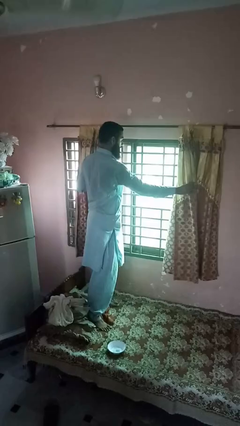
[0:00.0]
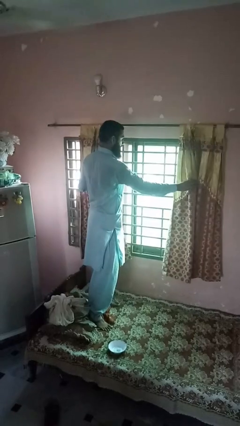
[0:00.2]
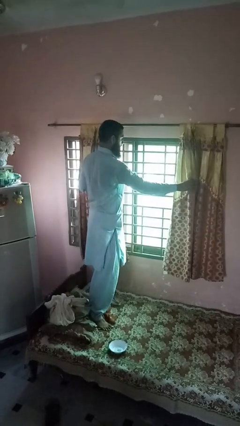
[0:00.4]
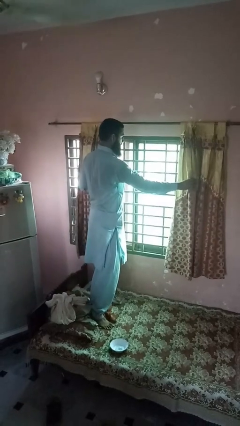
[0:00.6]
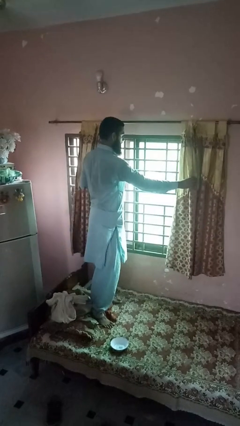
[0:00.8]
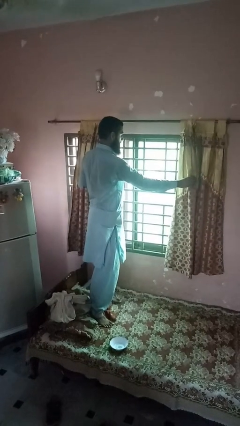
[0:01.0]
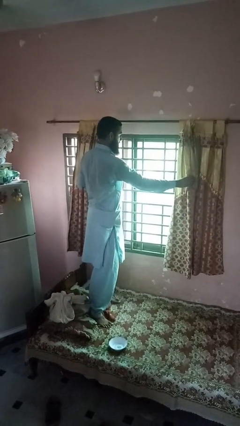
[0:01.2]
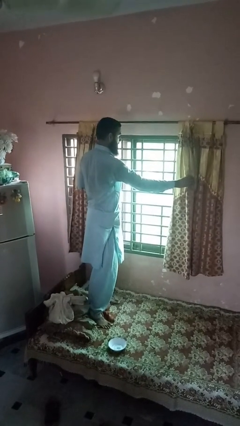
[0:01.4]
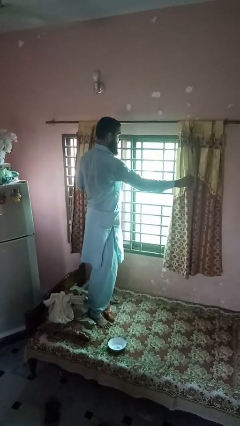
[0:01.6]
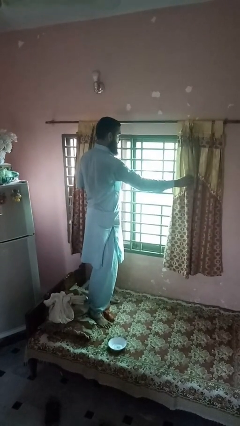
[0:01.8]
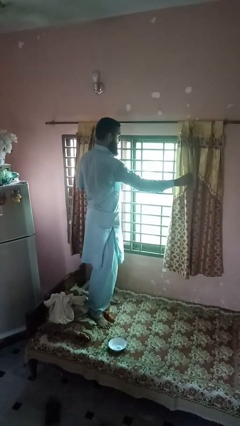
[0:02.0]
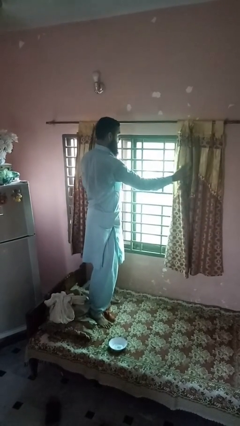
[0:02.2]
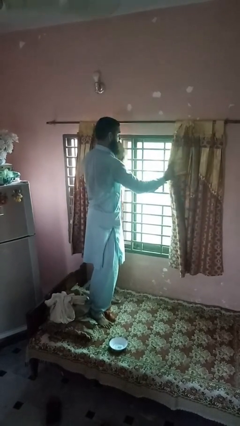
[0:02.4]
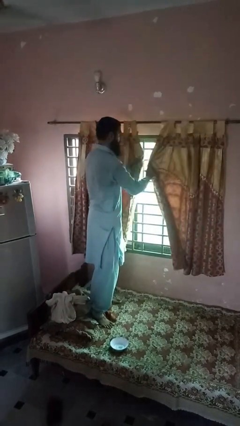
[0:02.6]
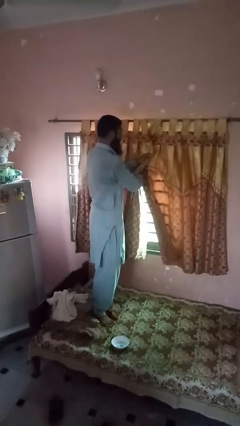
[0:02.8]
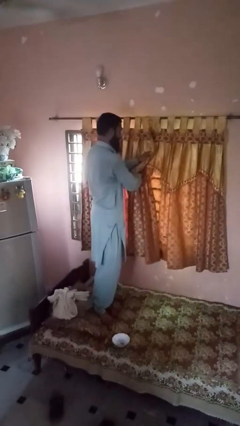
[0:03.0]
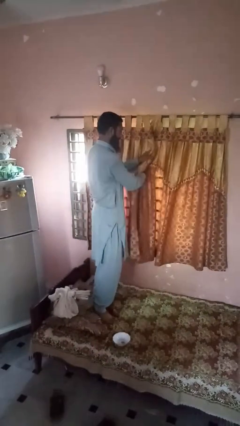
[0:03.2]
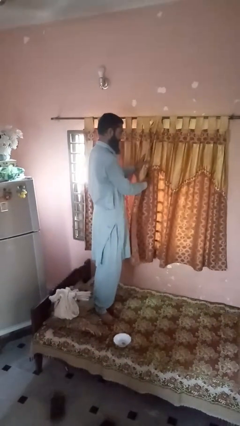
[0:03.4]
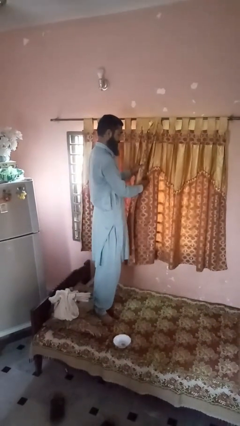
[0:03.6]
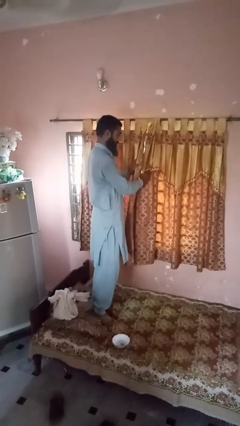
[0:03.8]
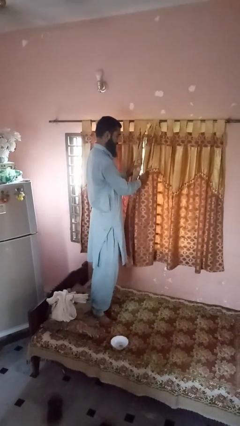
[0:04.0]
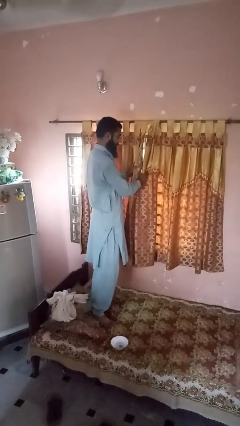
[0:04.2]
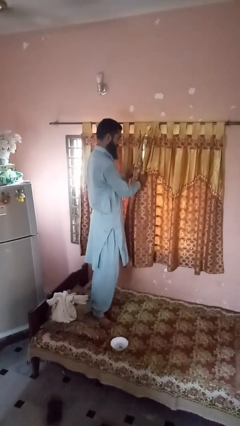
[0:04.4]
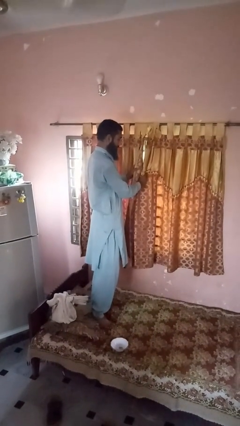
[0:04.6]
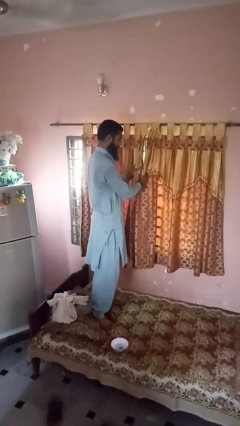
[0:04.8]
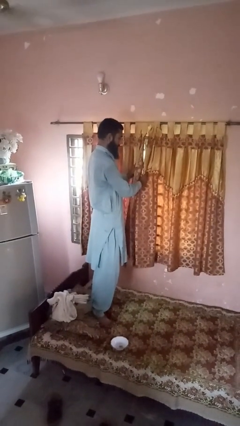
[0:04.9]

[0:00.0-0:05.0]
person closes curtains

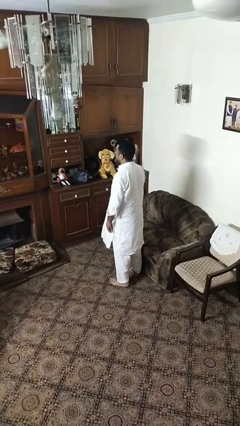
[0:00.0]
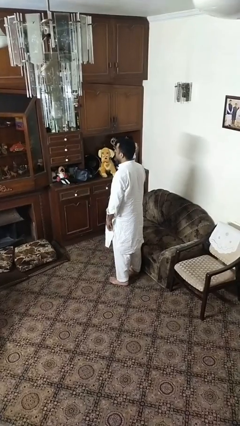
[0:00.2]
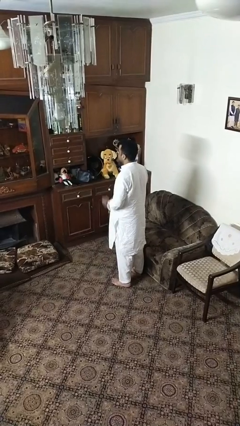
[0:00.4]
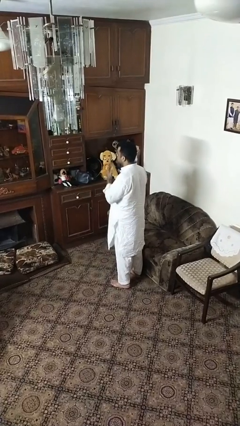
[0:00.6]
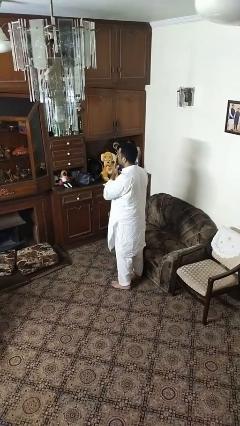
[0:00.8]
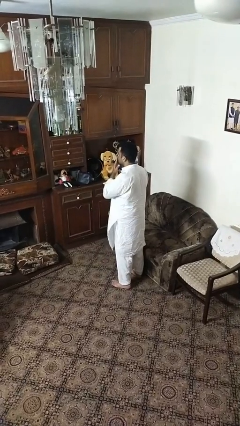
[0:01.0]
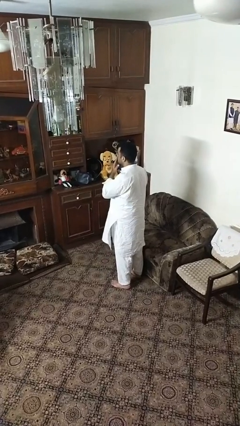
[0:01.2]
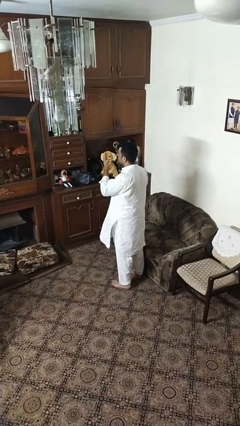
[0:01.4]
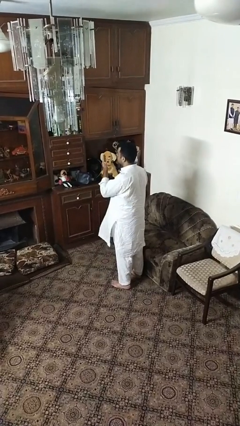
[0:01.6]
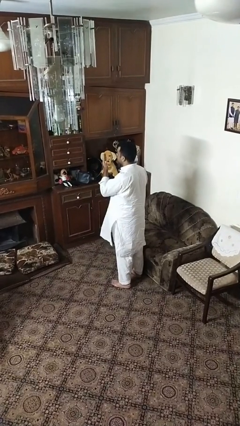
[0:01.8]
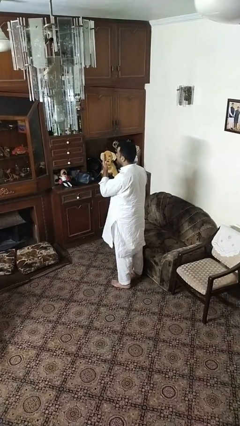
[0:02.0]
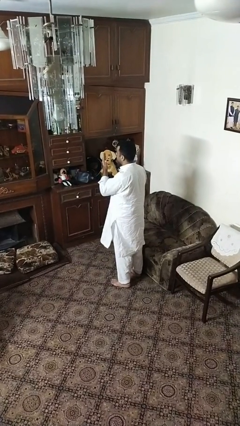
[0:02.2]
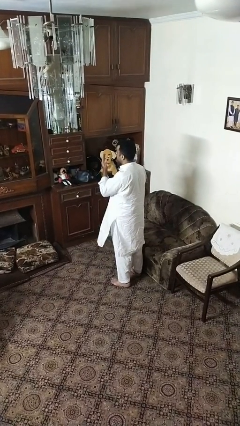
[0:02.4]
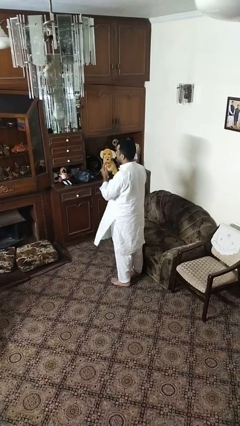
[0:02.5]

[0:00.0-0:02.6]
person gestures blow kiss

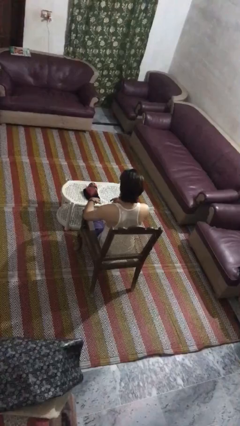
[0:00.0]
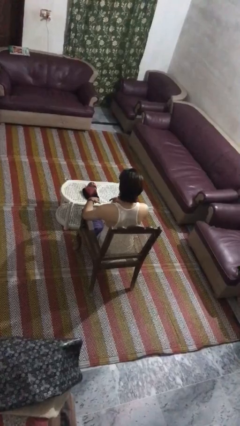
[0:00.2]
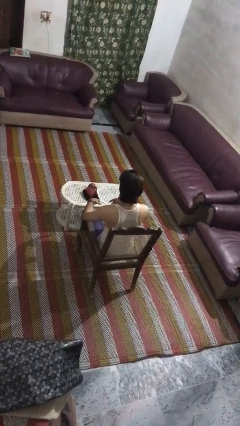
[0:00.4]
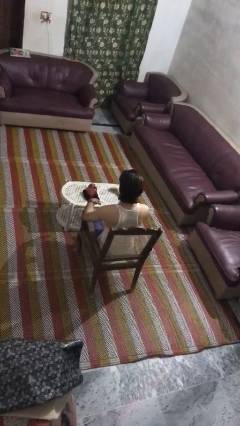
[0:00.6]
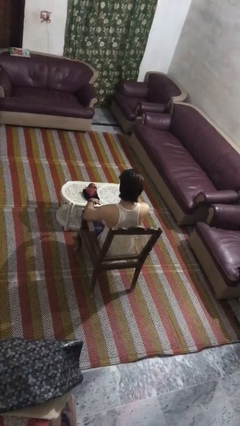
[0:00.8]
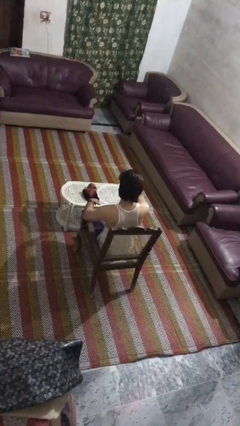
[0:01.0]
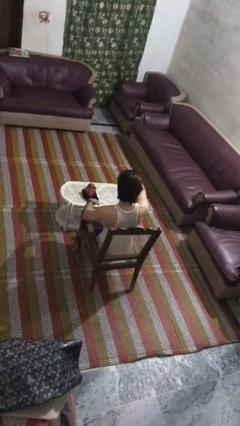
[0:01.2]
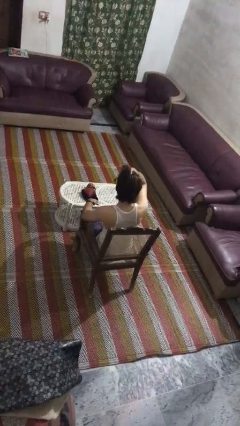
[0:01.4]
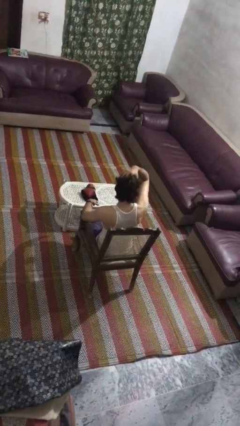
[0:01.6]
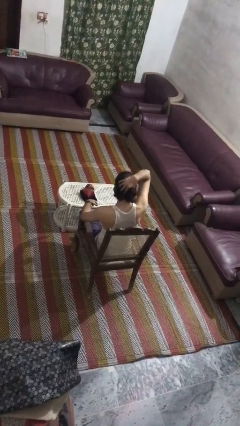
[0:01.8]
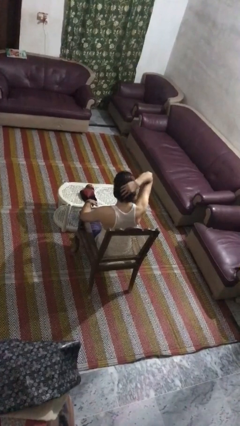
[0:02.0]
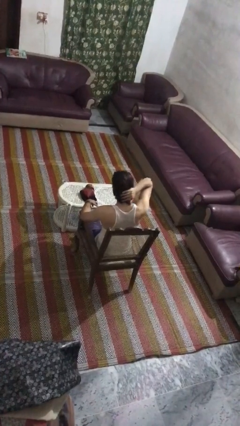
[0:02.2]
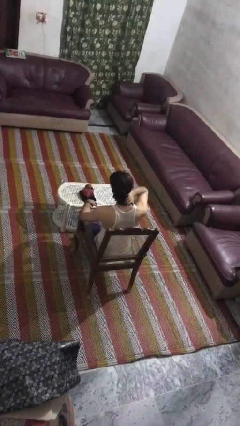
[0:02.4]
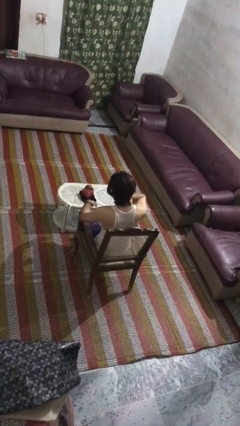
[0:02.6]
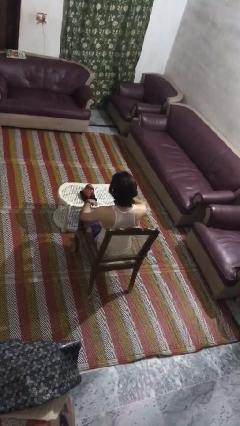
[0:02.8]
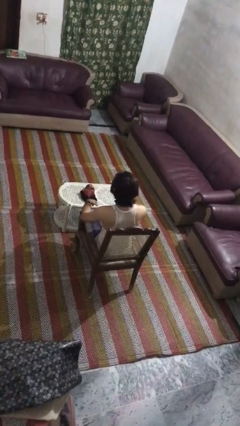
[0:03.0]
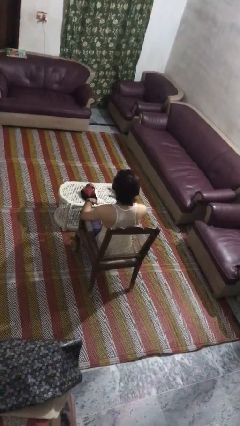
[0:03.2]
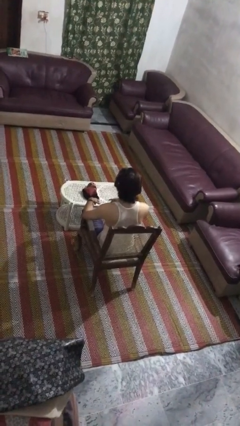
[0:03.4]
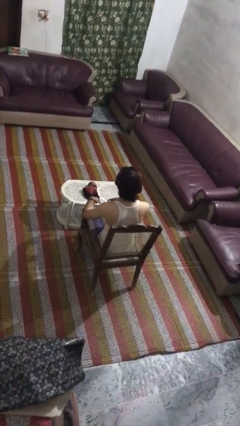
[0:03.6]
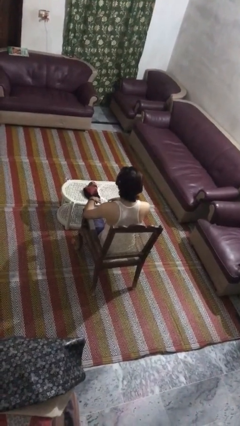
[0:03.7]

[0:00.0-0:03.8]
person strokes hair

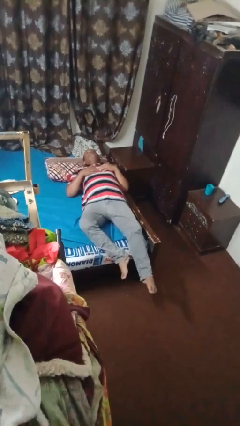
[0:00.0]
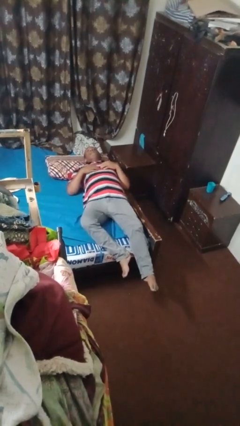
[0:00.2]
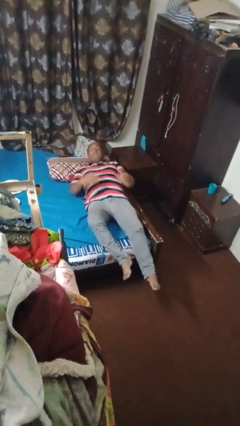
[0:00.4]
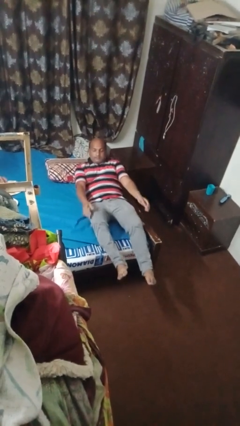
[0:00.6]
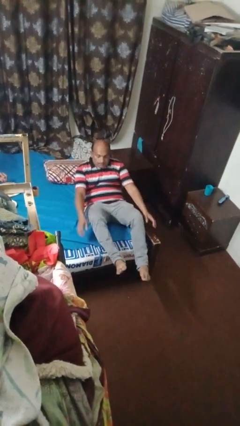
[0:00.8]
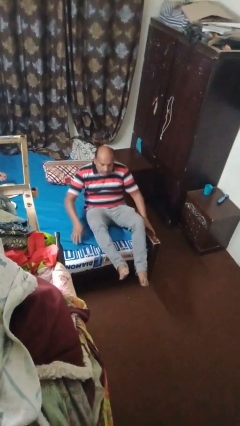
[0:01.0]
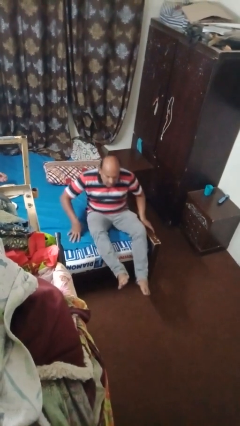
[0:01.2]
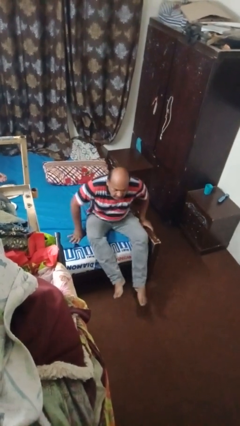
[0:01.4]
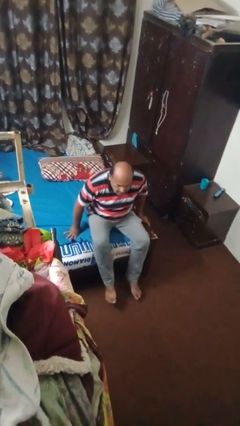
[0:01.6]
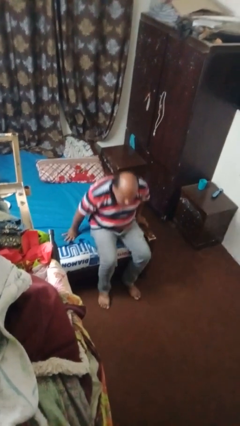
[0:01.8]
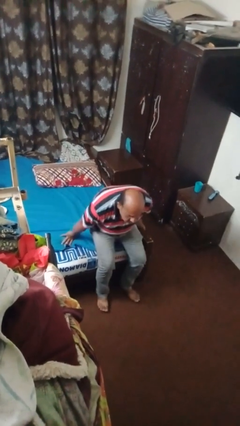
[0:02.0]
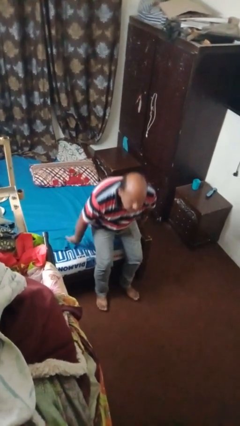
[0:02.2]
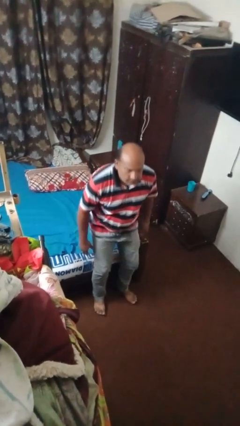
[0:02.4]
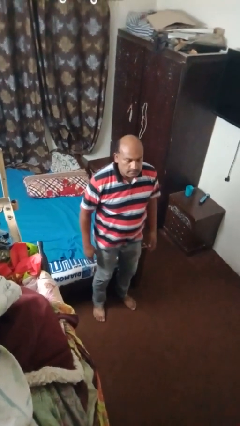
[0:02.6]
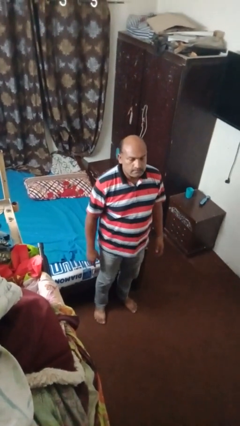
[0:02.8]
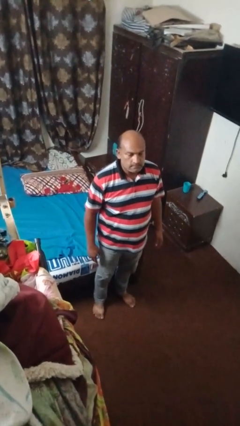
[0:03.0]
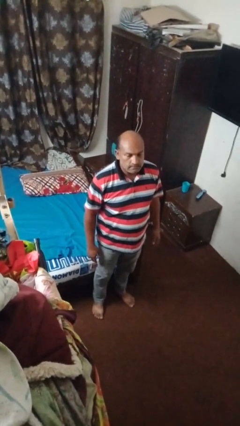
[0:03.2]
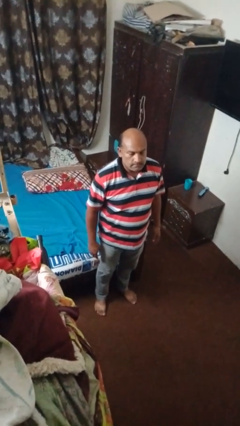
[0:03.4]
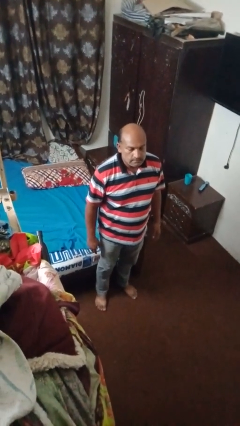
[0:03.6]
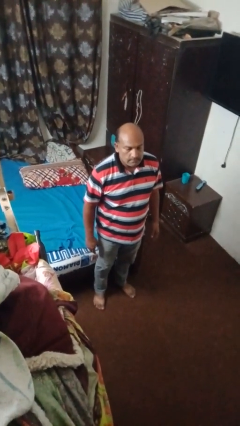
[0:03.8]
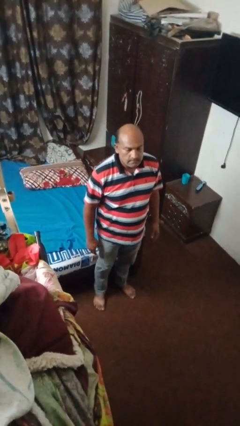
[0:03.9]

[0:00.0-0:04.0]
person stands up

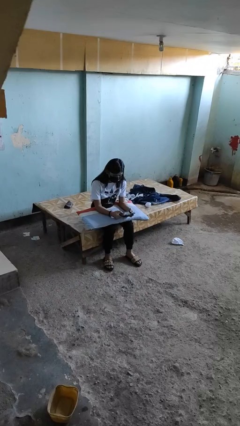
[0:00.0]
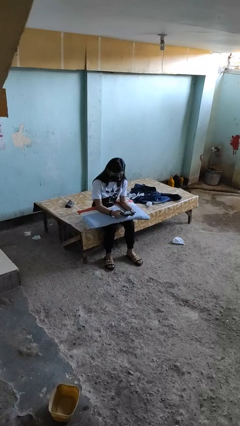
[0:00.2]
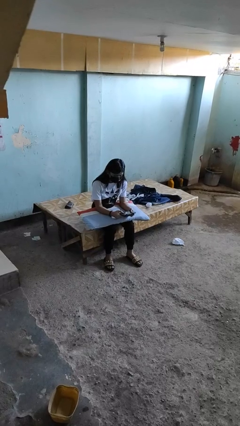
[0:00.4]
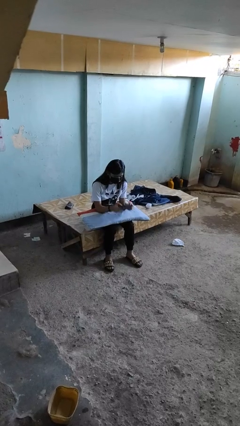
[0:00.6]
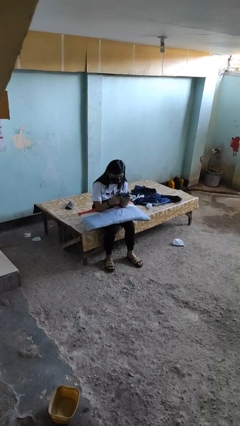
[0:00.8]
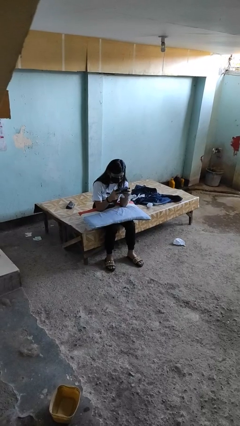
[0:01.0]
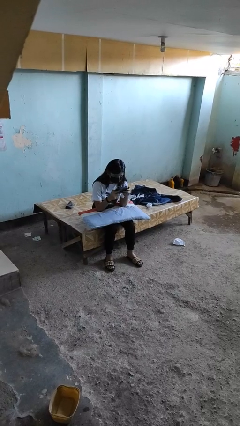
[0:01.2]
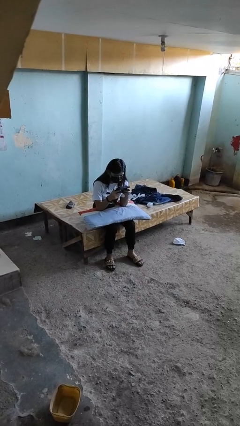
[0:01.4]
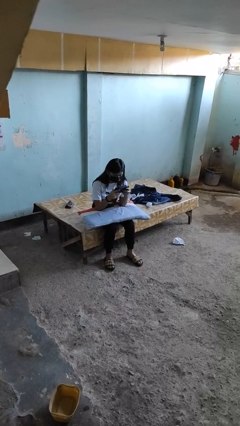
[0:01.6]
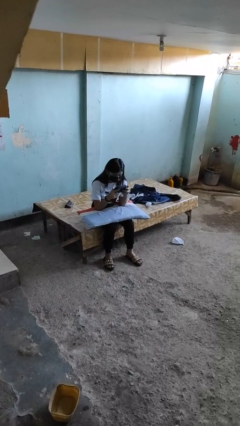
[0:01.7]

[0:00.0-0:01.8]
person interacts with handheld game

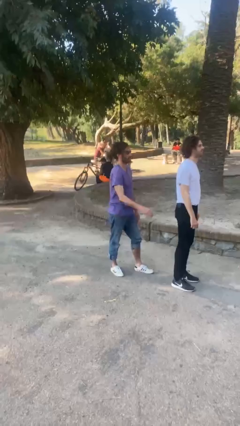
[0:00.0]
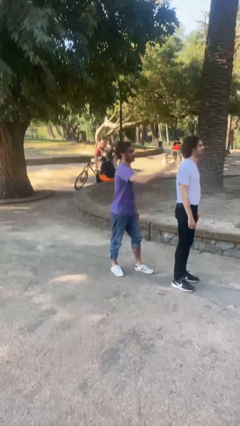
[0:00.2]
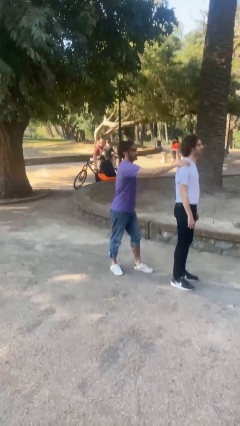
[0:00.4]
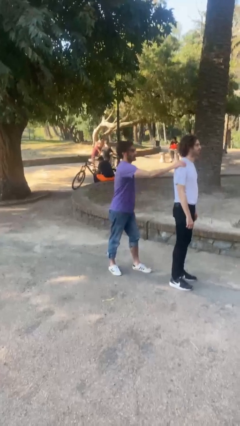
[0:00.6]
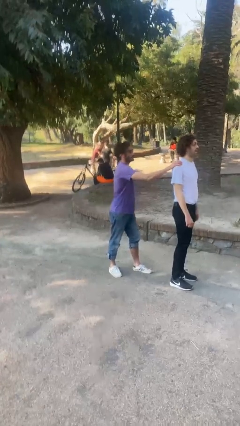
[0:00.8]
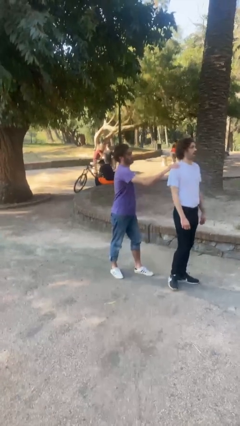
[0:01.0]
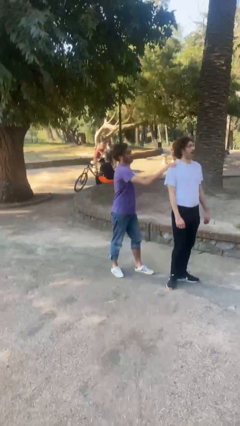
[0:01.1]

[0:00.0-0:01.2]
person grabs person by shoulder
